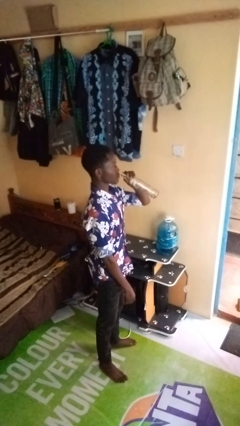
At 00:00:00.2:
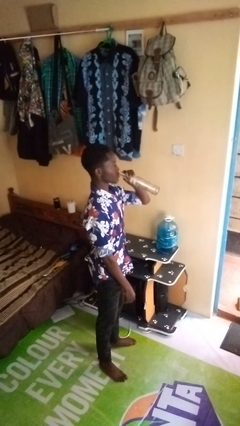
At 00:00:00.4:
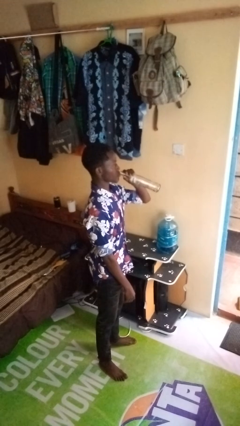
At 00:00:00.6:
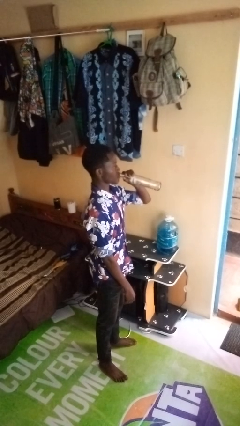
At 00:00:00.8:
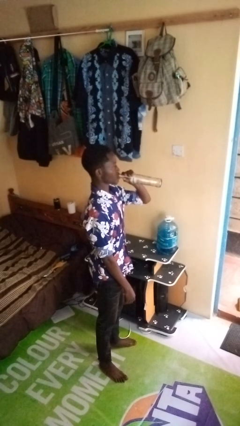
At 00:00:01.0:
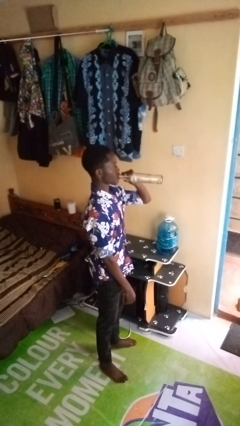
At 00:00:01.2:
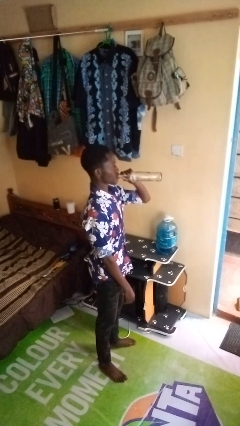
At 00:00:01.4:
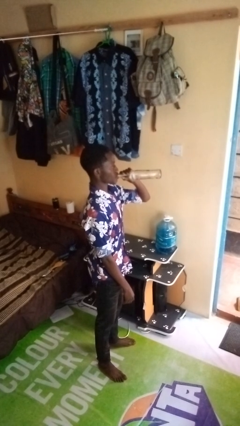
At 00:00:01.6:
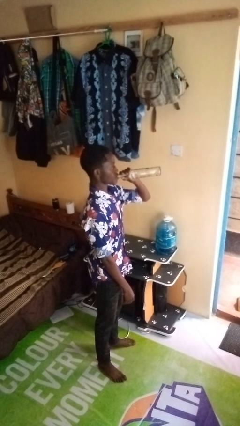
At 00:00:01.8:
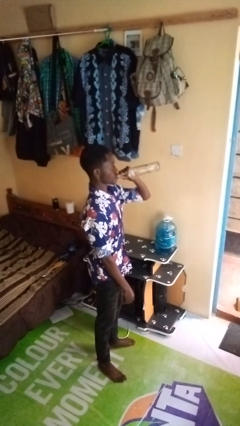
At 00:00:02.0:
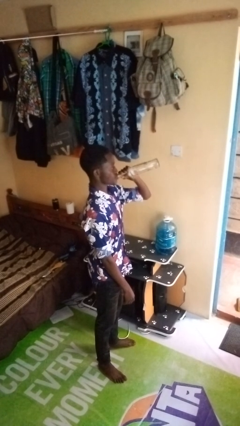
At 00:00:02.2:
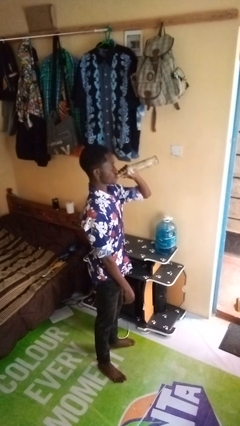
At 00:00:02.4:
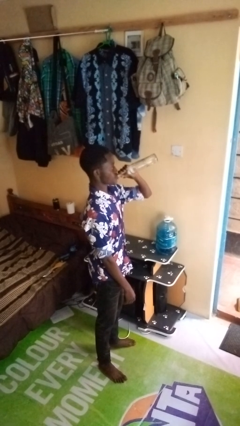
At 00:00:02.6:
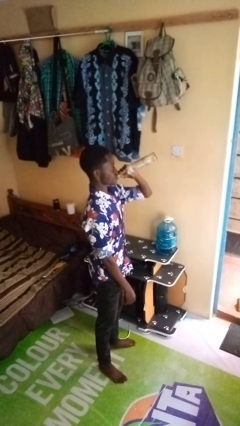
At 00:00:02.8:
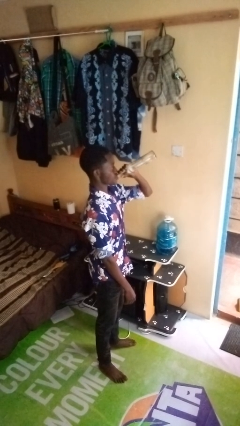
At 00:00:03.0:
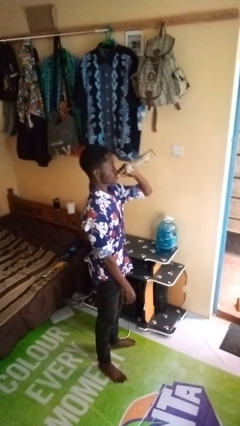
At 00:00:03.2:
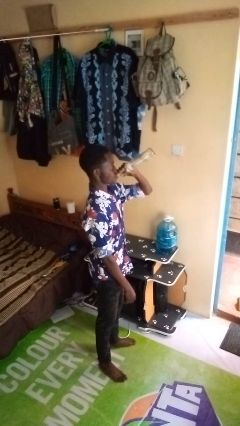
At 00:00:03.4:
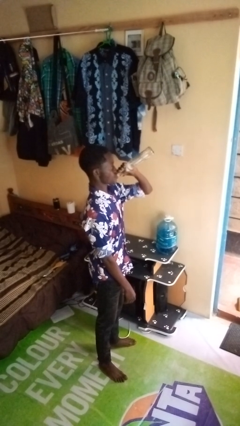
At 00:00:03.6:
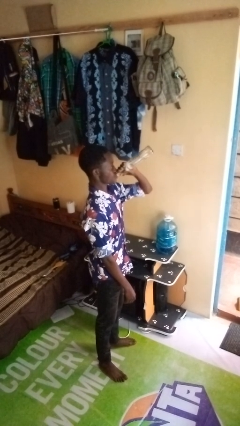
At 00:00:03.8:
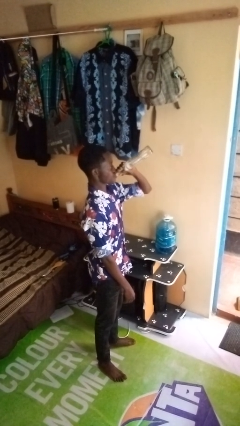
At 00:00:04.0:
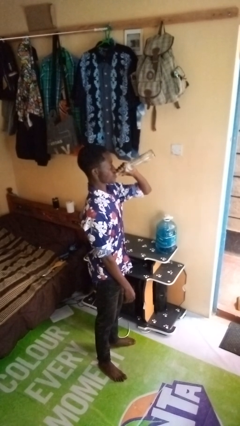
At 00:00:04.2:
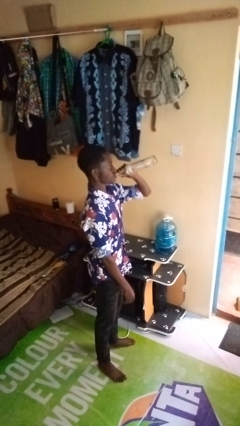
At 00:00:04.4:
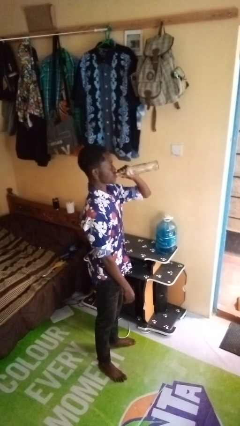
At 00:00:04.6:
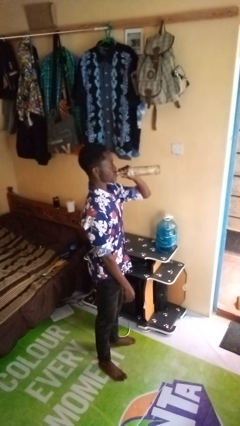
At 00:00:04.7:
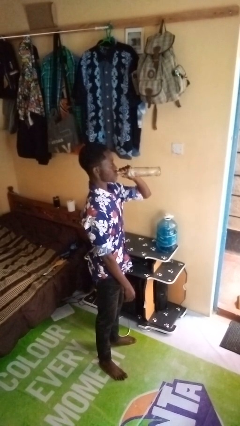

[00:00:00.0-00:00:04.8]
person drinks from bottle

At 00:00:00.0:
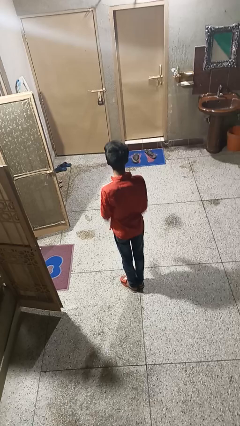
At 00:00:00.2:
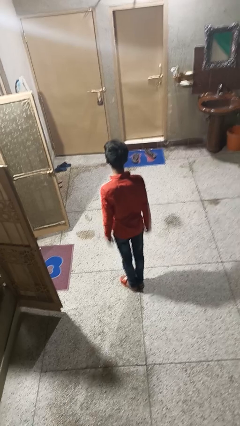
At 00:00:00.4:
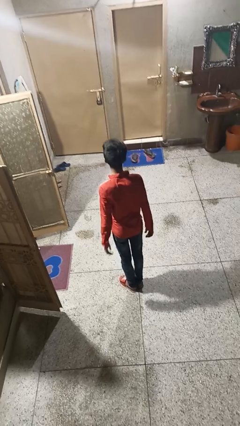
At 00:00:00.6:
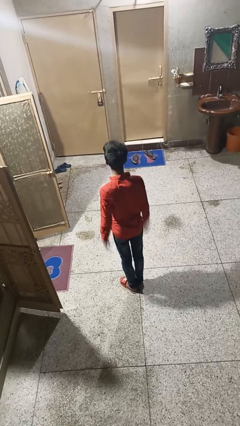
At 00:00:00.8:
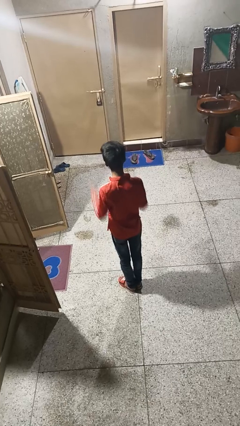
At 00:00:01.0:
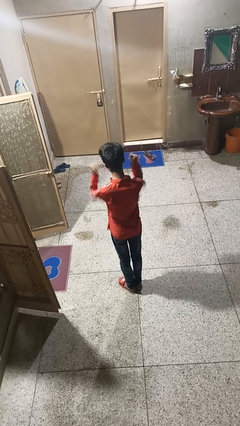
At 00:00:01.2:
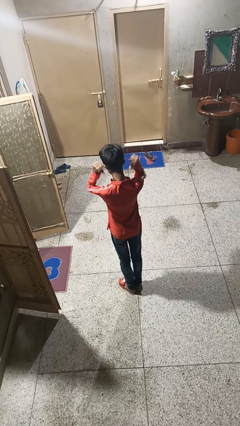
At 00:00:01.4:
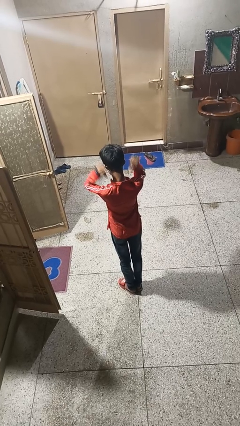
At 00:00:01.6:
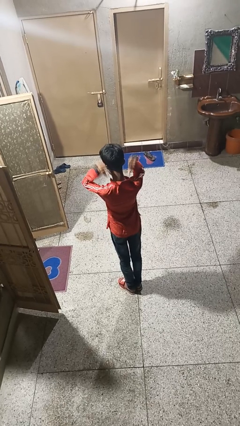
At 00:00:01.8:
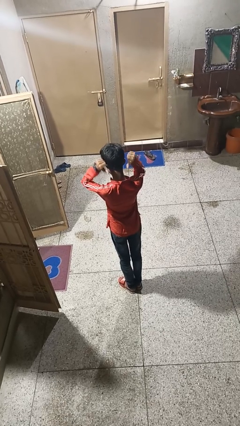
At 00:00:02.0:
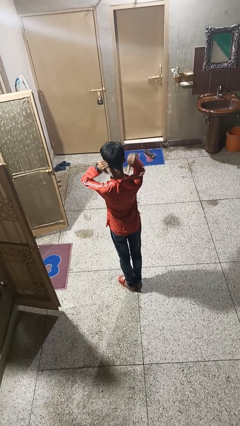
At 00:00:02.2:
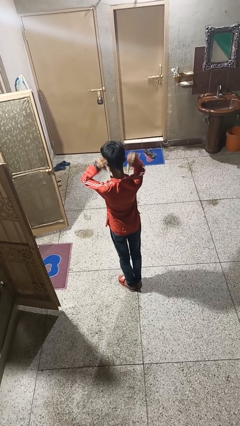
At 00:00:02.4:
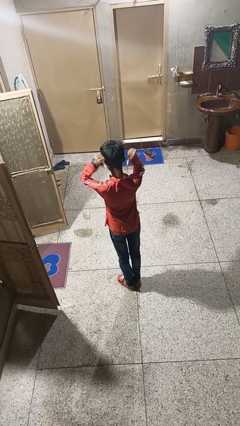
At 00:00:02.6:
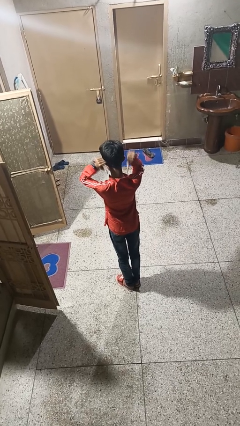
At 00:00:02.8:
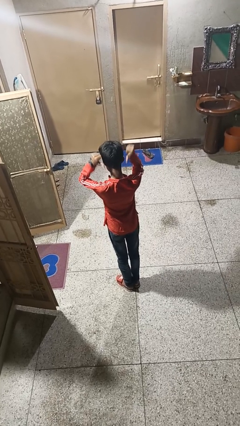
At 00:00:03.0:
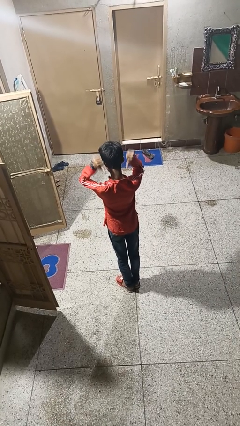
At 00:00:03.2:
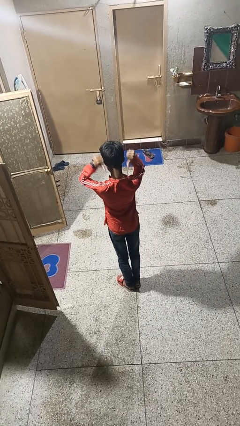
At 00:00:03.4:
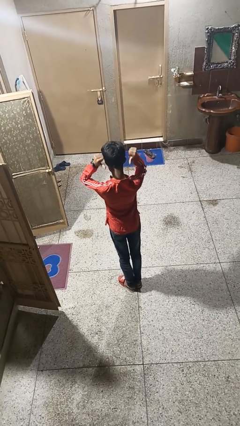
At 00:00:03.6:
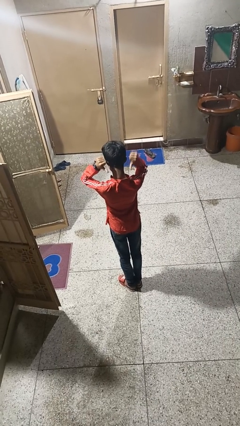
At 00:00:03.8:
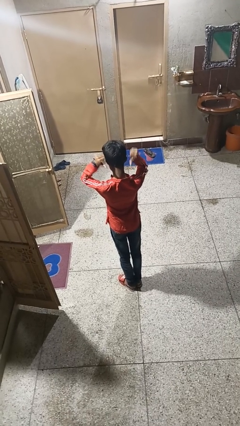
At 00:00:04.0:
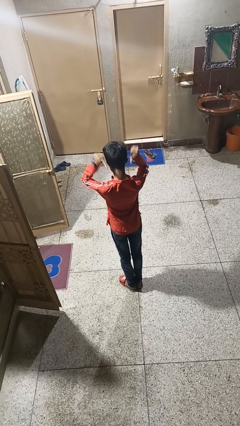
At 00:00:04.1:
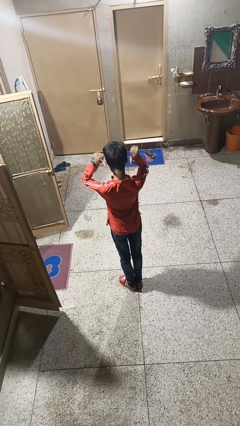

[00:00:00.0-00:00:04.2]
person gestures behind me

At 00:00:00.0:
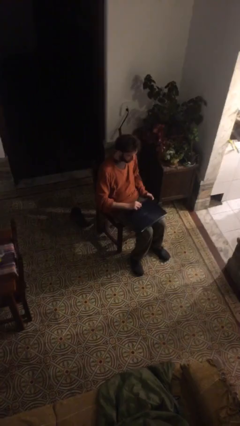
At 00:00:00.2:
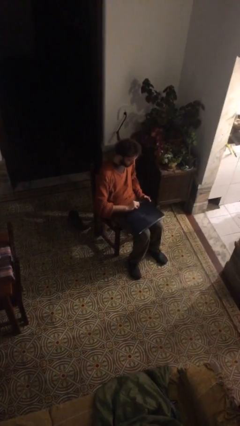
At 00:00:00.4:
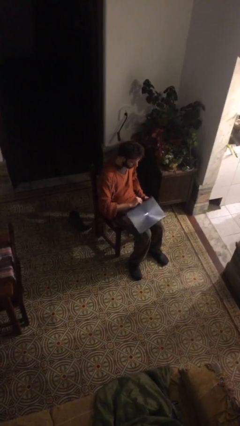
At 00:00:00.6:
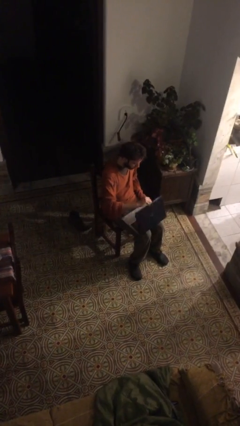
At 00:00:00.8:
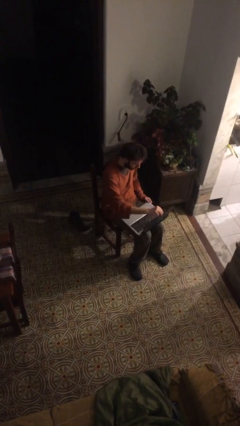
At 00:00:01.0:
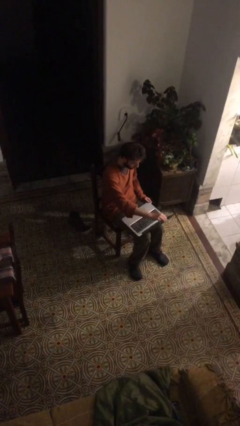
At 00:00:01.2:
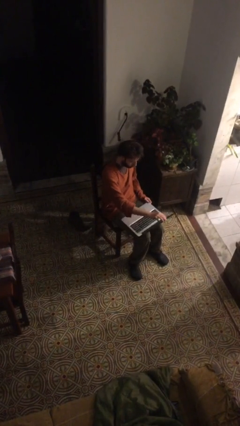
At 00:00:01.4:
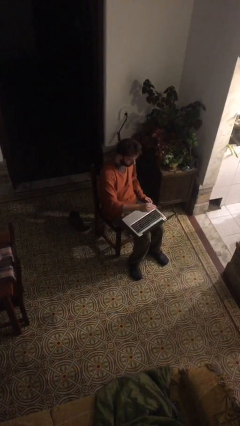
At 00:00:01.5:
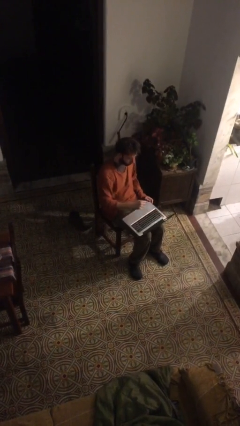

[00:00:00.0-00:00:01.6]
person opens laptop

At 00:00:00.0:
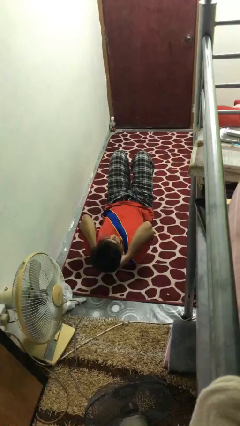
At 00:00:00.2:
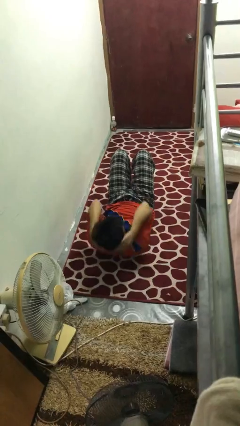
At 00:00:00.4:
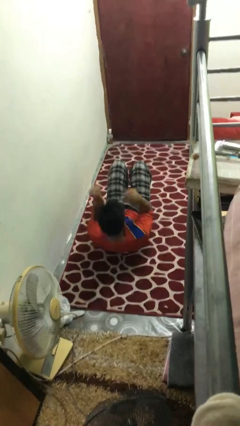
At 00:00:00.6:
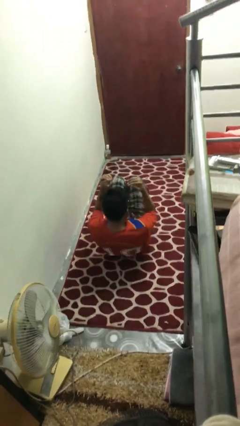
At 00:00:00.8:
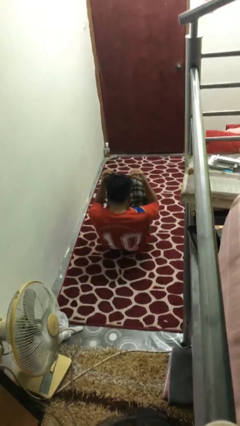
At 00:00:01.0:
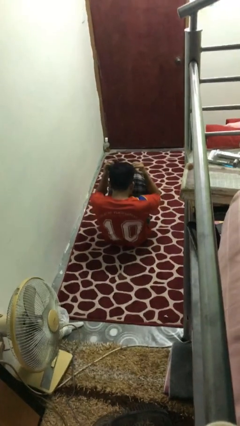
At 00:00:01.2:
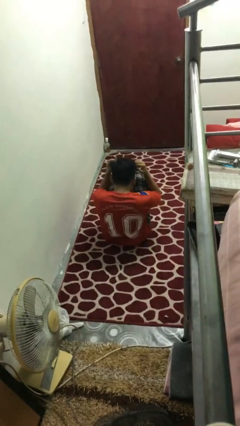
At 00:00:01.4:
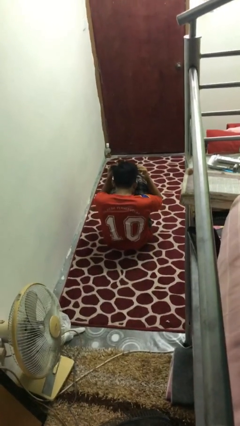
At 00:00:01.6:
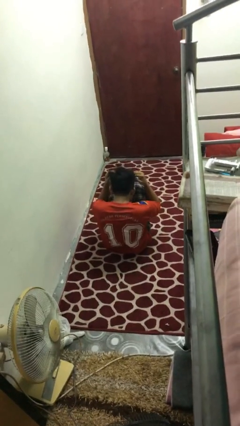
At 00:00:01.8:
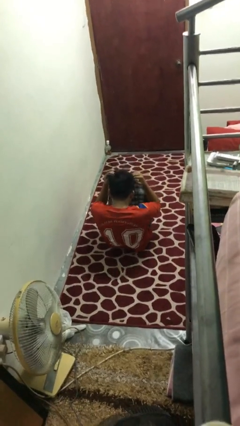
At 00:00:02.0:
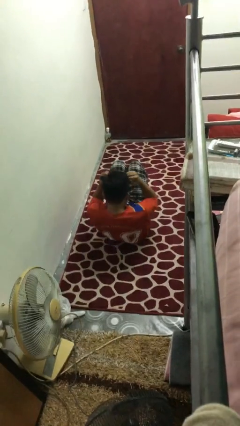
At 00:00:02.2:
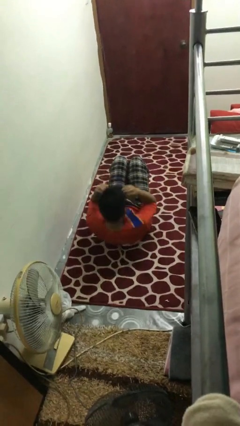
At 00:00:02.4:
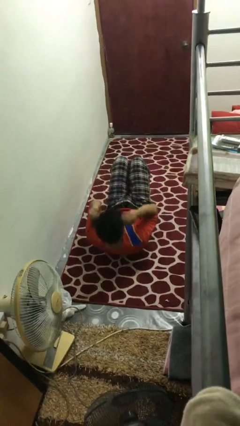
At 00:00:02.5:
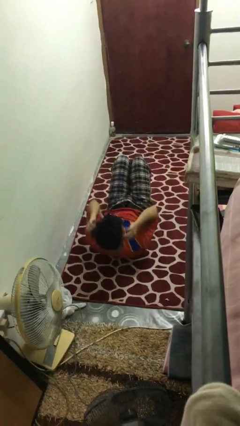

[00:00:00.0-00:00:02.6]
person exercises with situp

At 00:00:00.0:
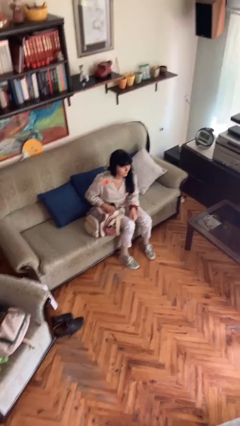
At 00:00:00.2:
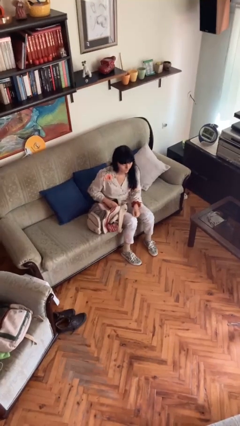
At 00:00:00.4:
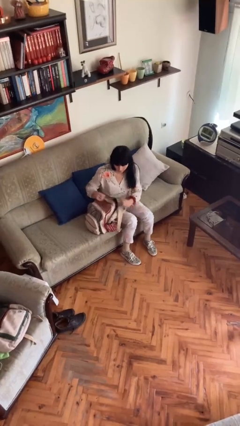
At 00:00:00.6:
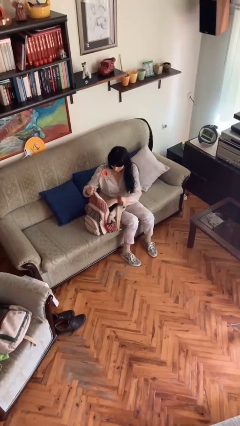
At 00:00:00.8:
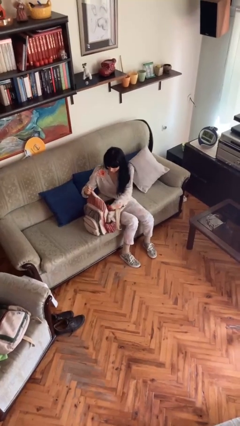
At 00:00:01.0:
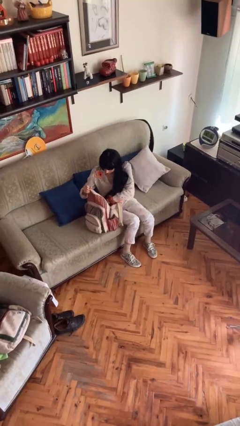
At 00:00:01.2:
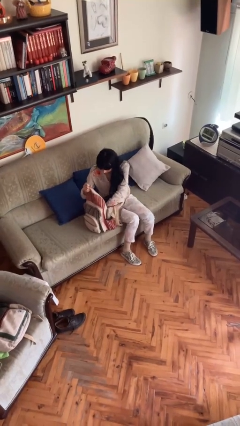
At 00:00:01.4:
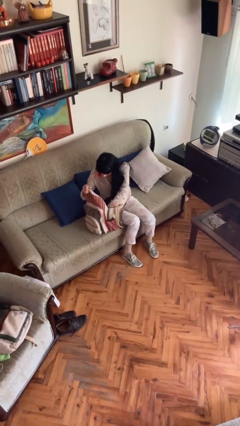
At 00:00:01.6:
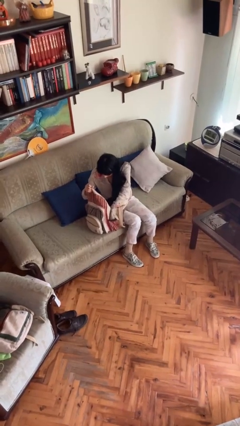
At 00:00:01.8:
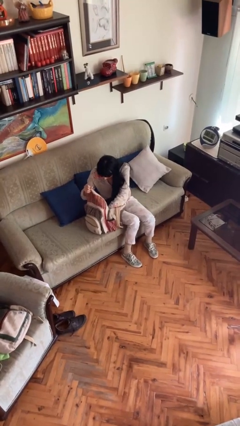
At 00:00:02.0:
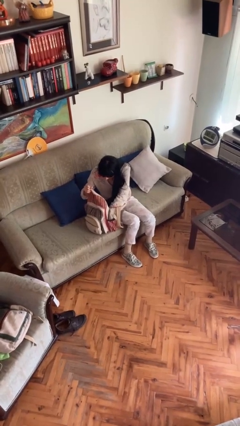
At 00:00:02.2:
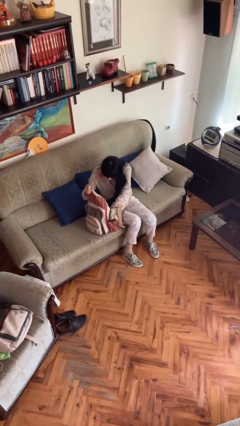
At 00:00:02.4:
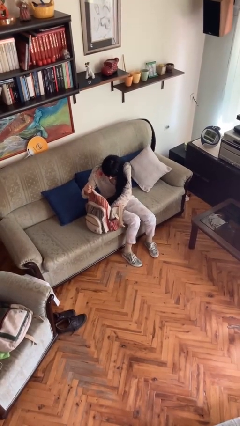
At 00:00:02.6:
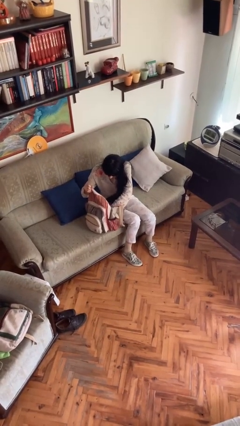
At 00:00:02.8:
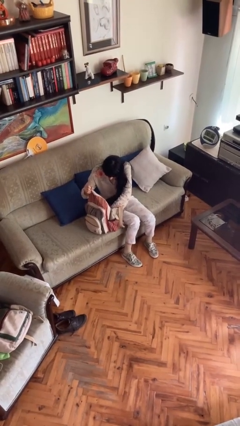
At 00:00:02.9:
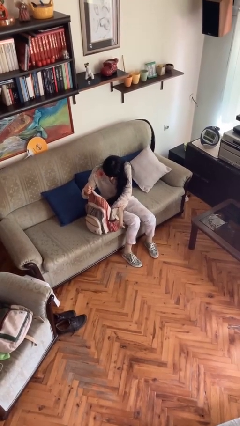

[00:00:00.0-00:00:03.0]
person searches in backpack

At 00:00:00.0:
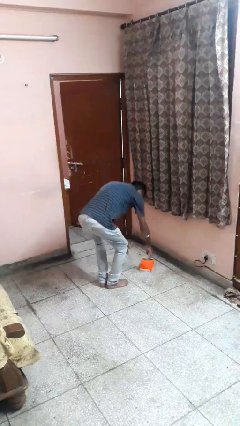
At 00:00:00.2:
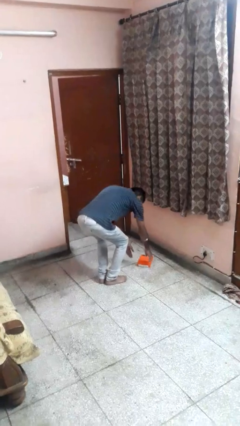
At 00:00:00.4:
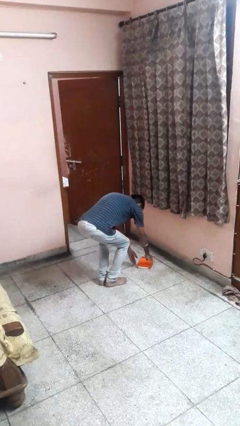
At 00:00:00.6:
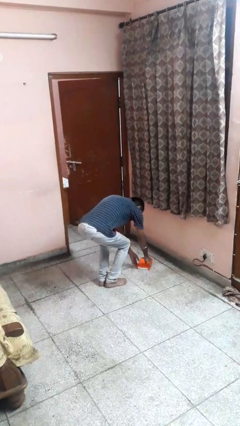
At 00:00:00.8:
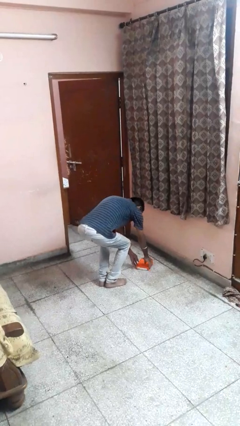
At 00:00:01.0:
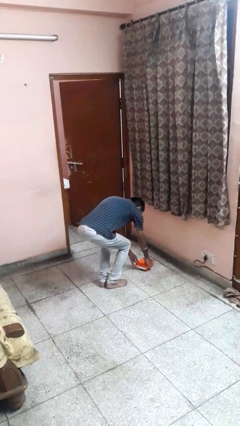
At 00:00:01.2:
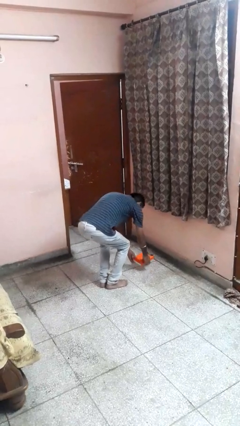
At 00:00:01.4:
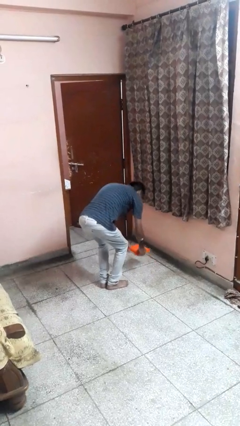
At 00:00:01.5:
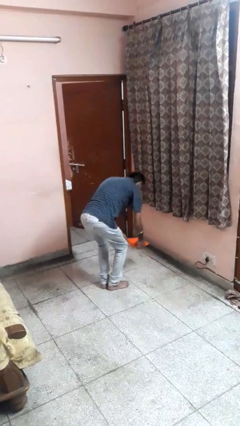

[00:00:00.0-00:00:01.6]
person picks up object from floor
